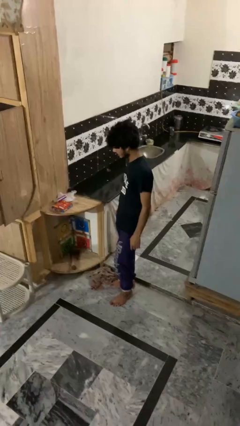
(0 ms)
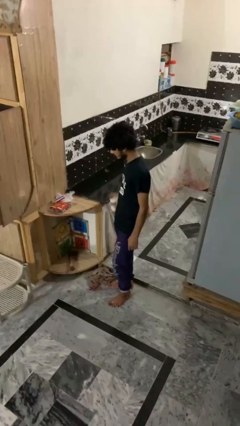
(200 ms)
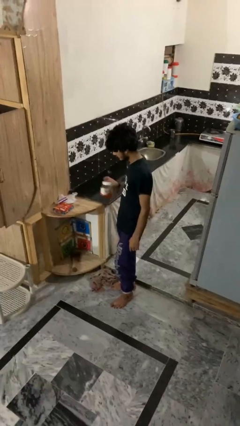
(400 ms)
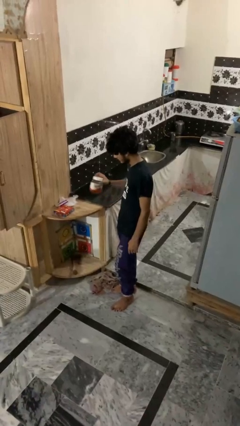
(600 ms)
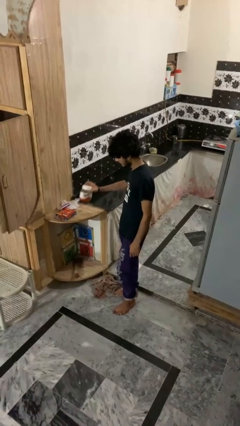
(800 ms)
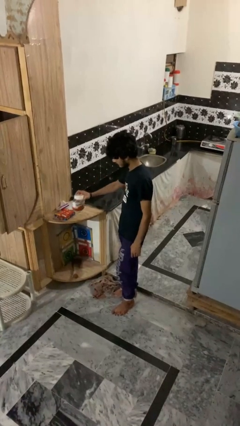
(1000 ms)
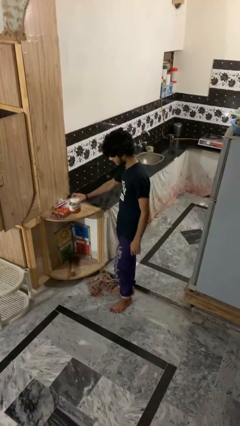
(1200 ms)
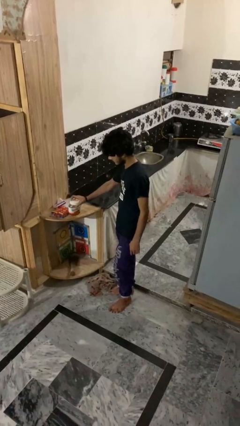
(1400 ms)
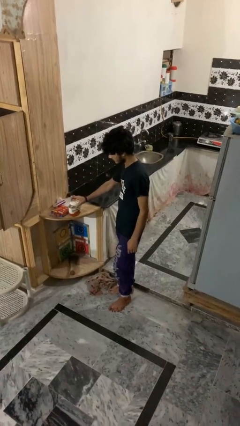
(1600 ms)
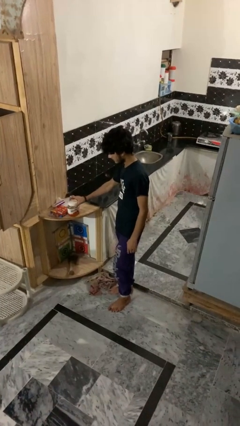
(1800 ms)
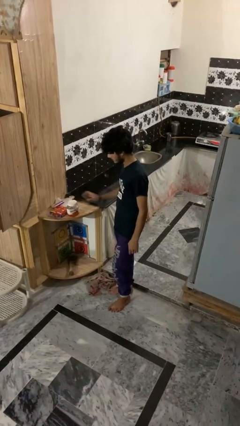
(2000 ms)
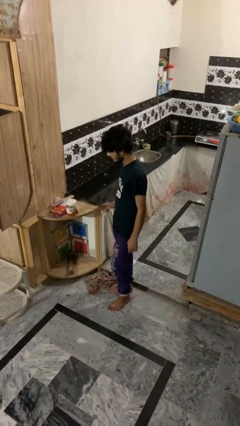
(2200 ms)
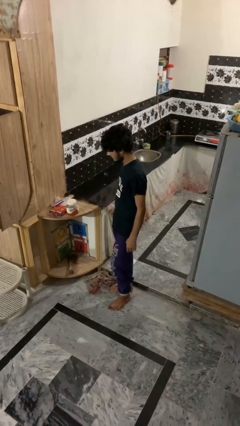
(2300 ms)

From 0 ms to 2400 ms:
person puts down object on countertop

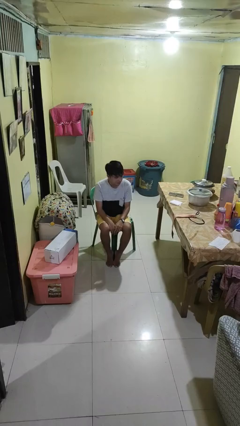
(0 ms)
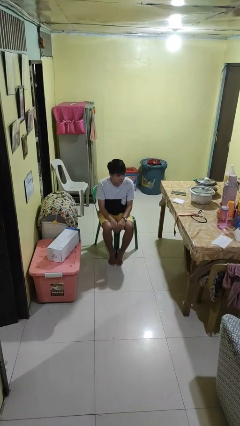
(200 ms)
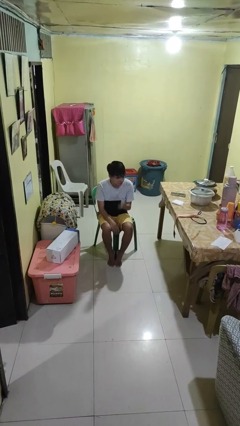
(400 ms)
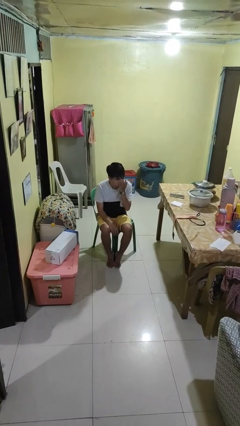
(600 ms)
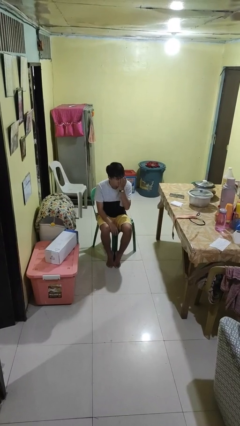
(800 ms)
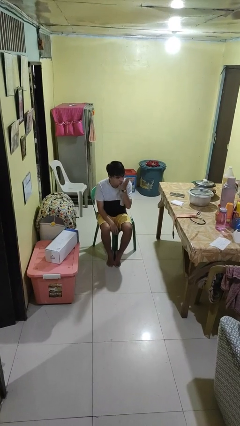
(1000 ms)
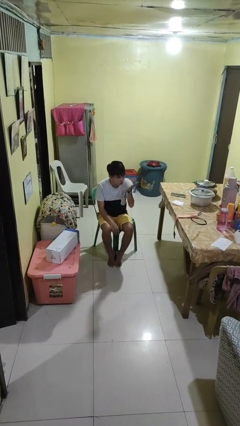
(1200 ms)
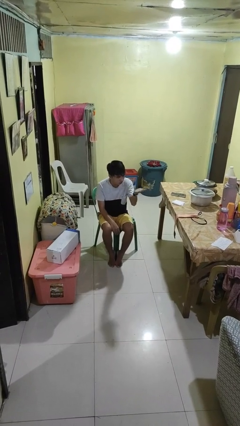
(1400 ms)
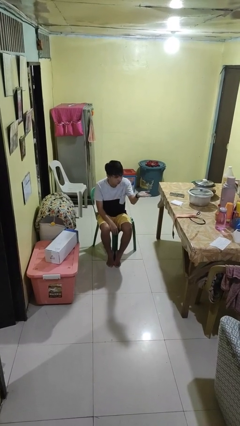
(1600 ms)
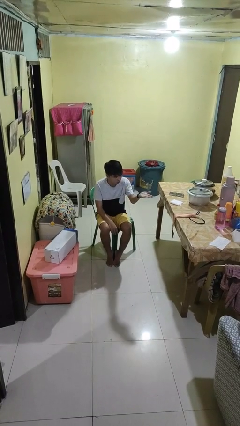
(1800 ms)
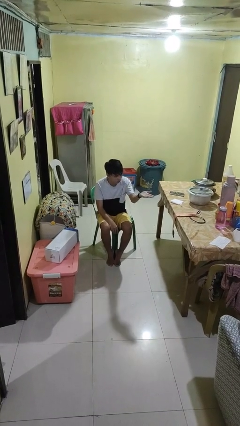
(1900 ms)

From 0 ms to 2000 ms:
person gestures blow kiss

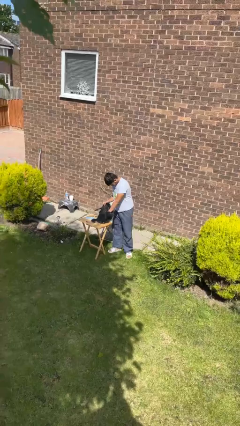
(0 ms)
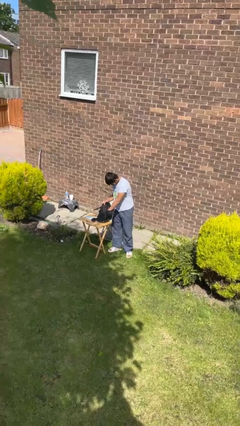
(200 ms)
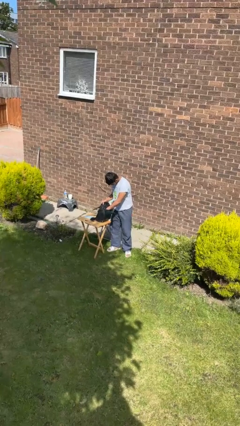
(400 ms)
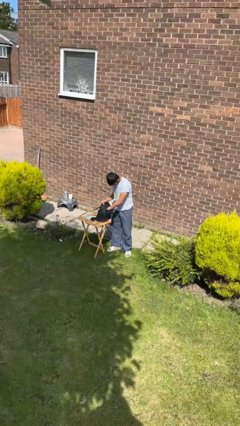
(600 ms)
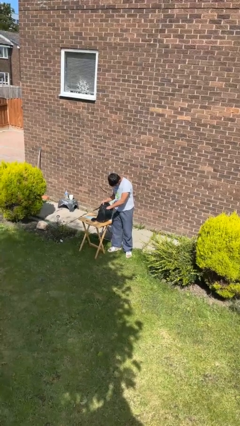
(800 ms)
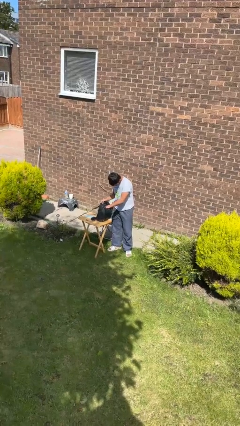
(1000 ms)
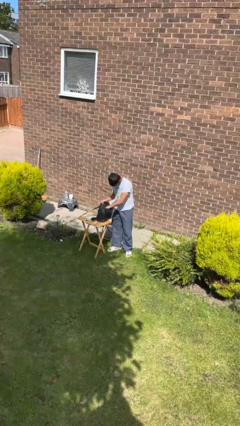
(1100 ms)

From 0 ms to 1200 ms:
person searches in backpack

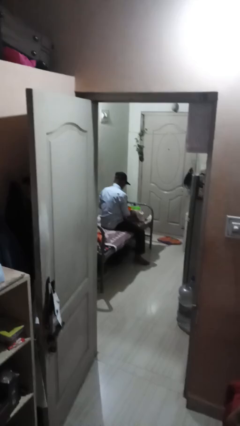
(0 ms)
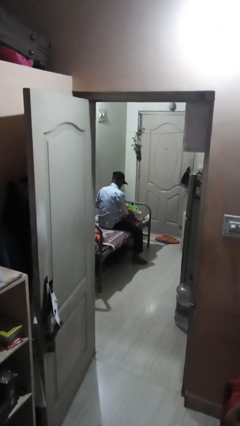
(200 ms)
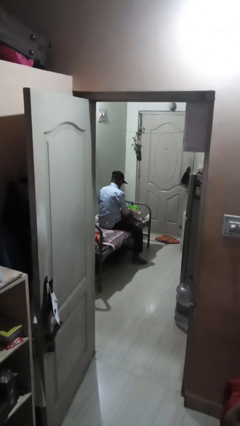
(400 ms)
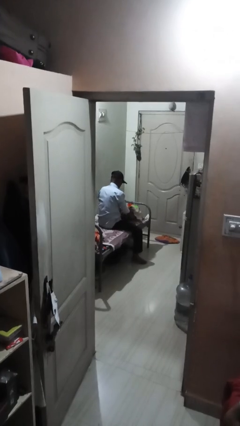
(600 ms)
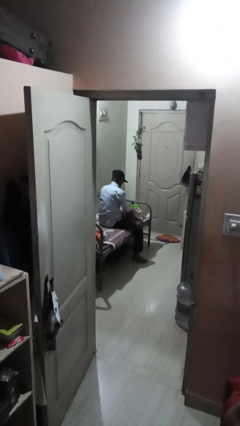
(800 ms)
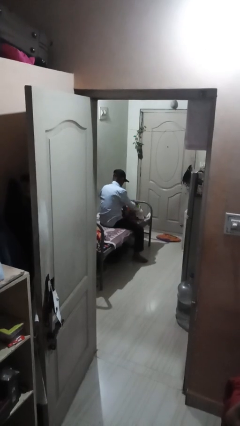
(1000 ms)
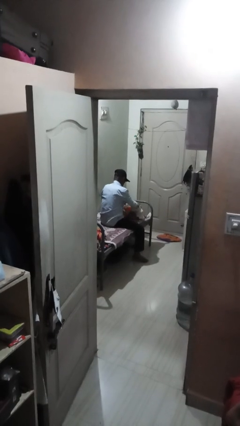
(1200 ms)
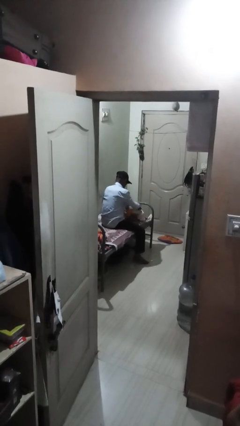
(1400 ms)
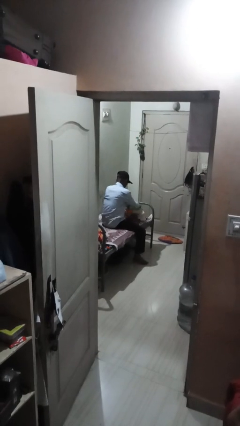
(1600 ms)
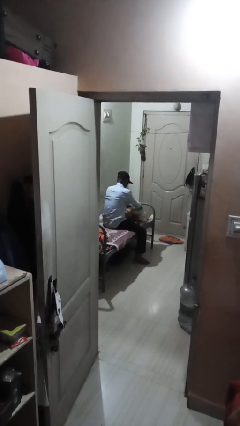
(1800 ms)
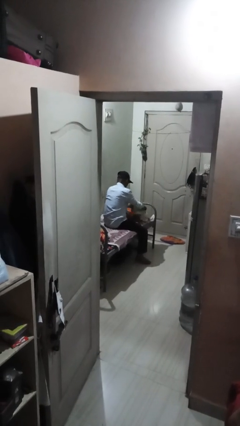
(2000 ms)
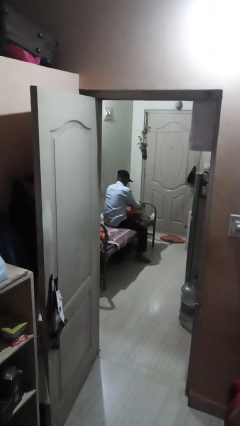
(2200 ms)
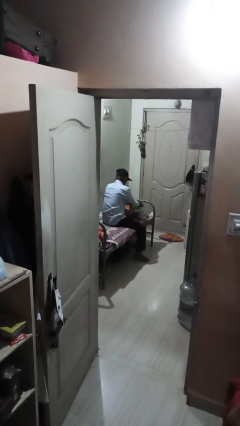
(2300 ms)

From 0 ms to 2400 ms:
person searches in bag

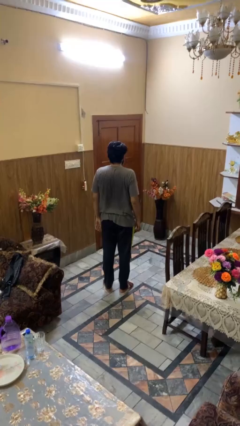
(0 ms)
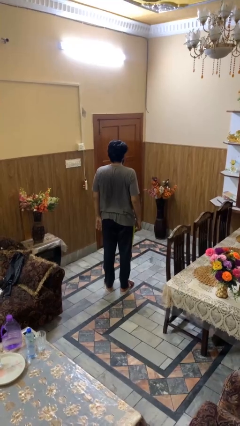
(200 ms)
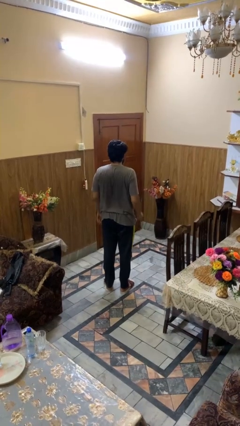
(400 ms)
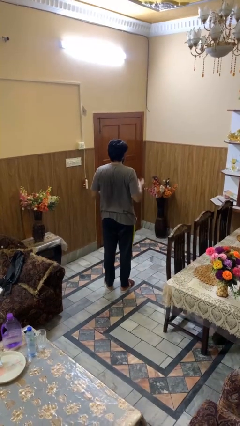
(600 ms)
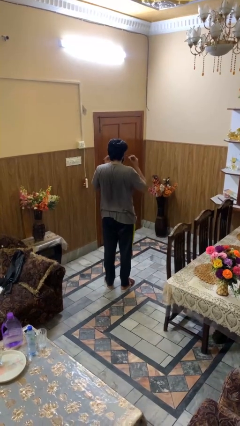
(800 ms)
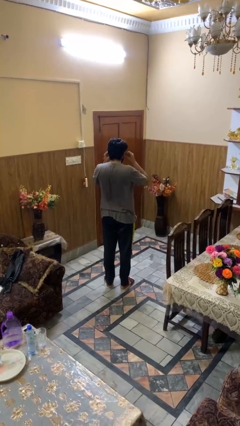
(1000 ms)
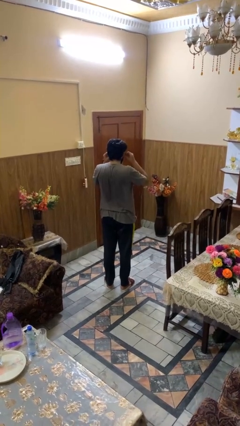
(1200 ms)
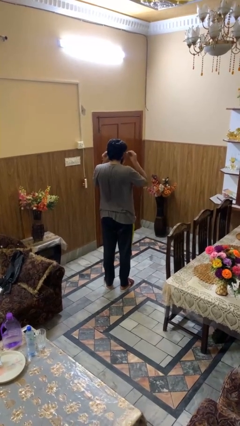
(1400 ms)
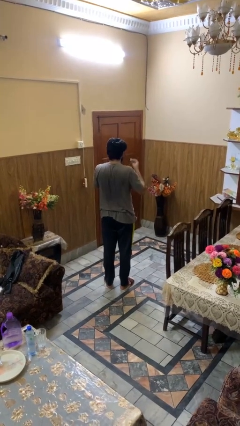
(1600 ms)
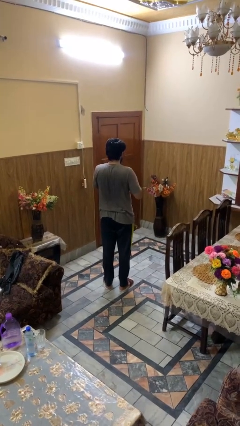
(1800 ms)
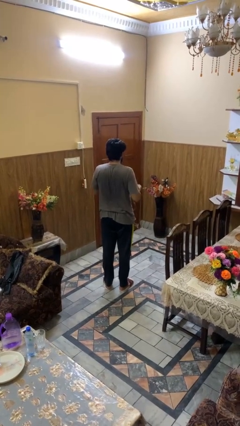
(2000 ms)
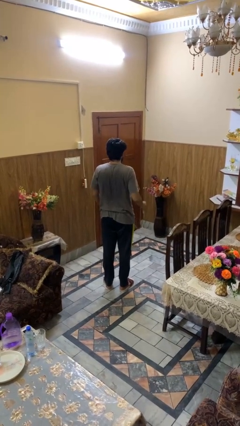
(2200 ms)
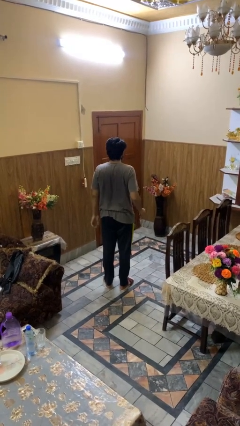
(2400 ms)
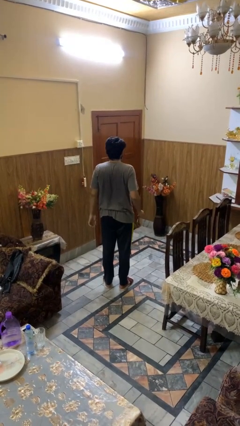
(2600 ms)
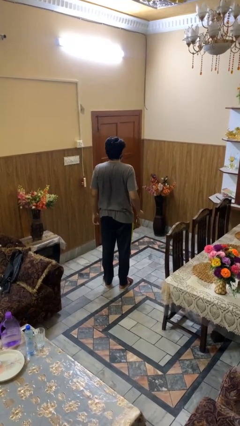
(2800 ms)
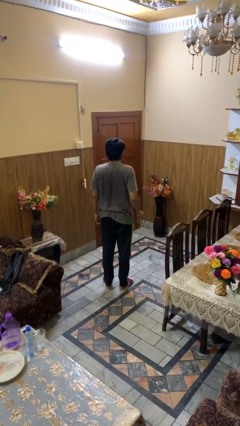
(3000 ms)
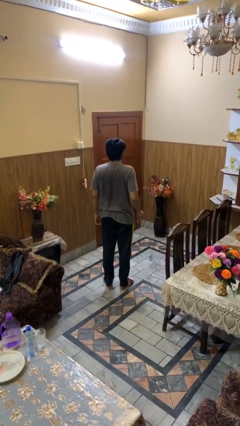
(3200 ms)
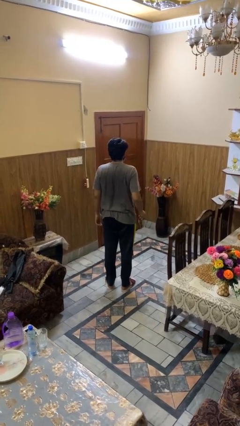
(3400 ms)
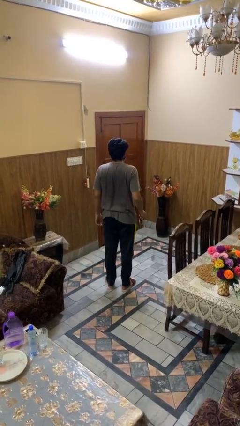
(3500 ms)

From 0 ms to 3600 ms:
person takes off headphones

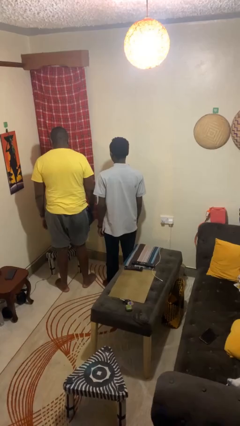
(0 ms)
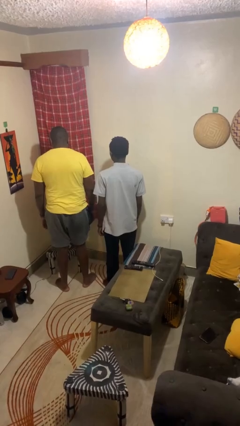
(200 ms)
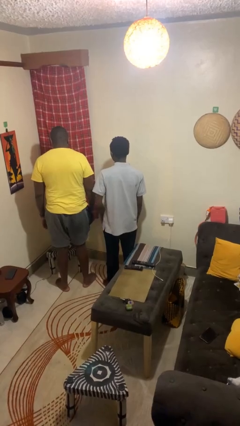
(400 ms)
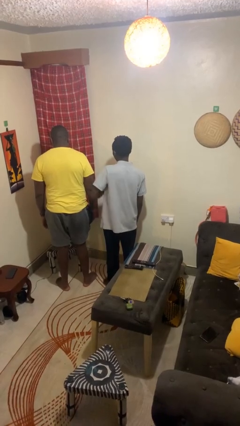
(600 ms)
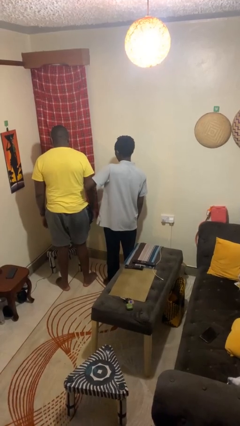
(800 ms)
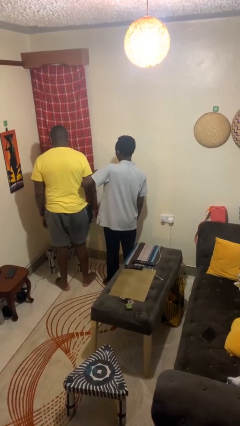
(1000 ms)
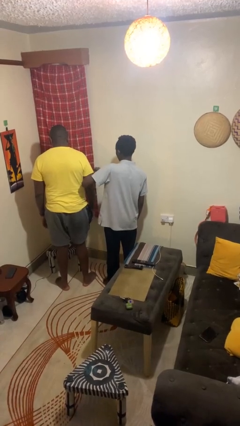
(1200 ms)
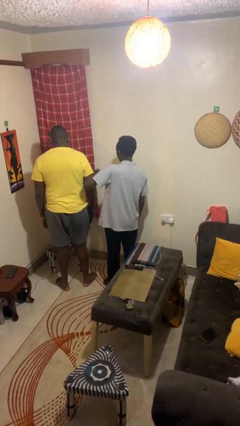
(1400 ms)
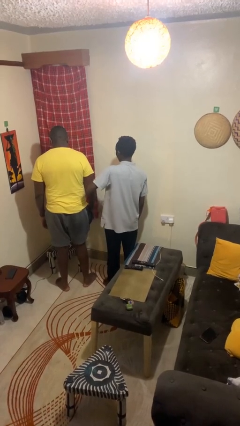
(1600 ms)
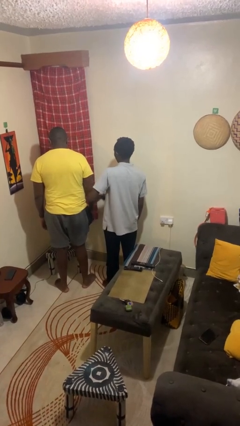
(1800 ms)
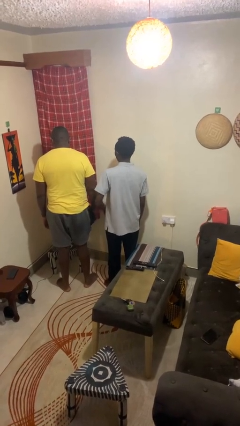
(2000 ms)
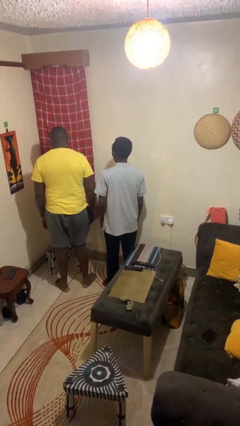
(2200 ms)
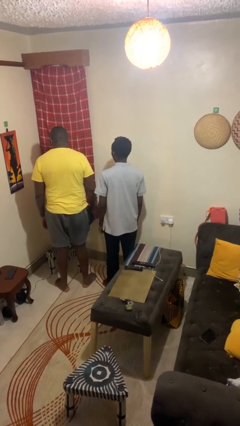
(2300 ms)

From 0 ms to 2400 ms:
person nudges person with elbow

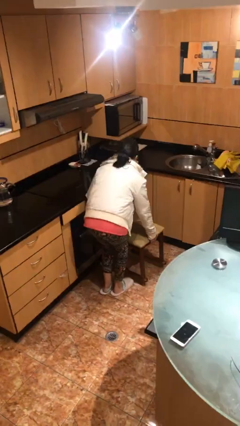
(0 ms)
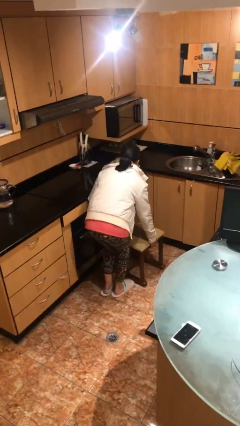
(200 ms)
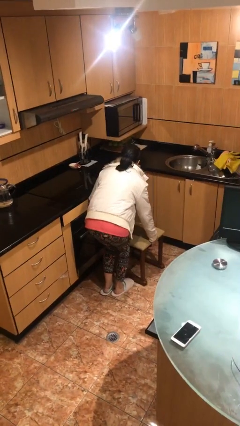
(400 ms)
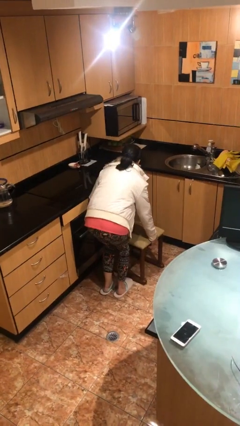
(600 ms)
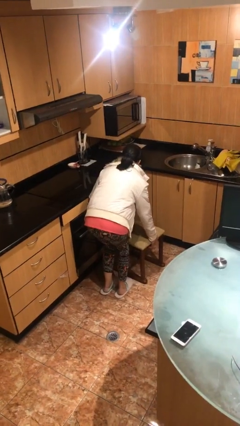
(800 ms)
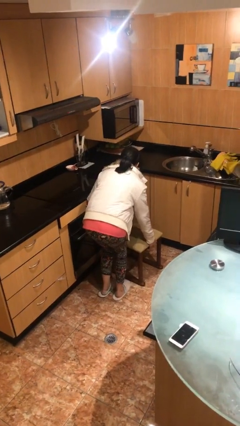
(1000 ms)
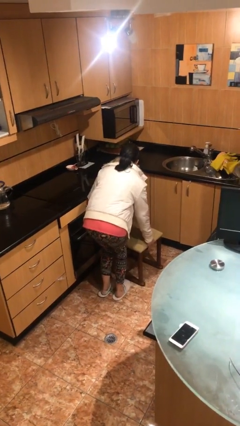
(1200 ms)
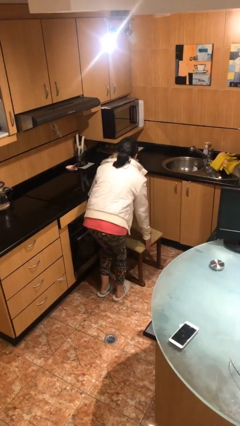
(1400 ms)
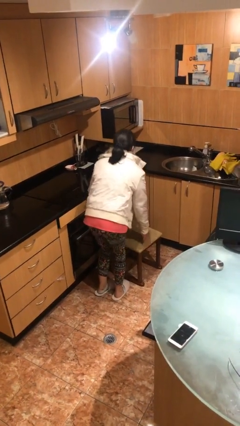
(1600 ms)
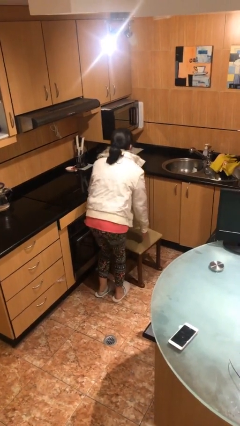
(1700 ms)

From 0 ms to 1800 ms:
person puts down object on floor

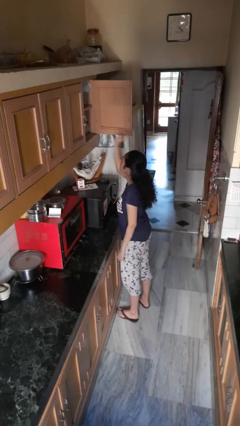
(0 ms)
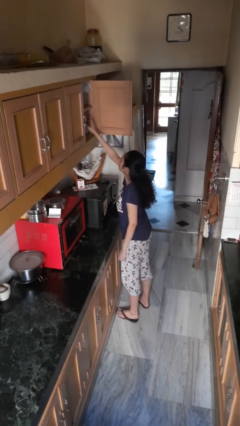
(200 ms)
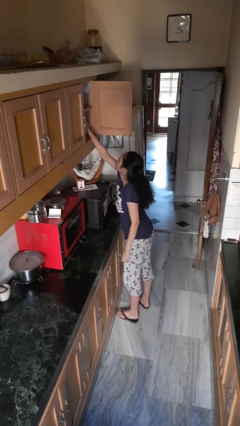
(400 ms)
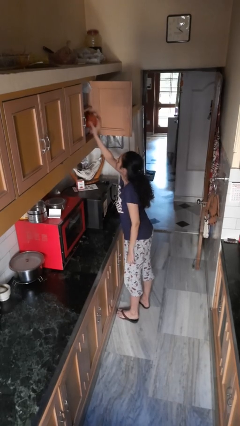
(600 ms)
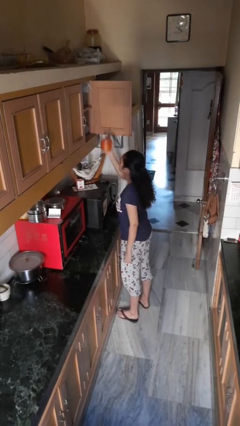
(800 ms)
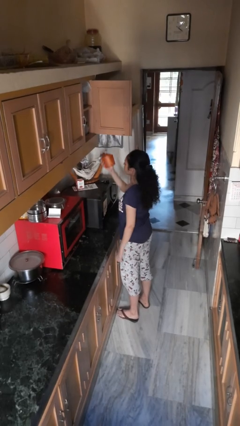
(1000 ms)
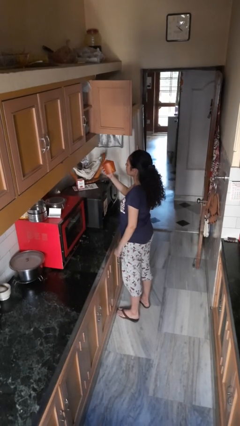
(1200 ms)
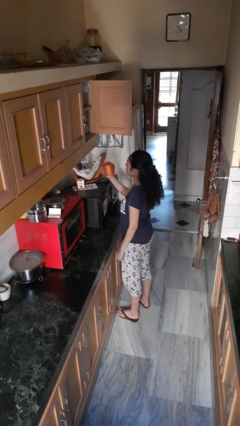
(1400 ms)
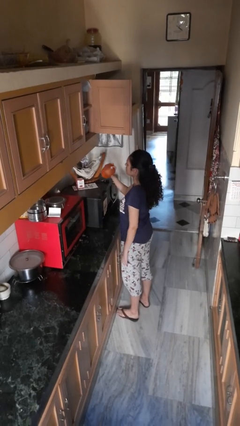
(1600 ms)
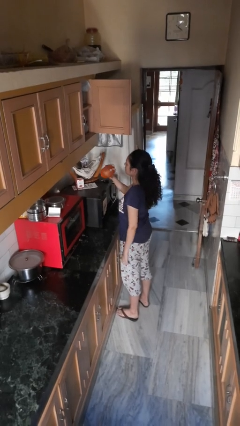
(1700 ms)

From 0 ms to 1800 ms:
person takes object from cabinet
